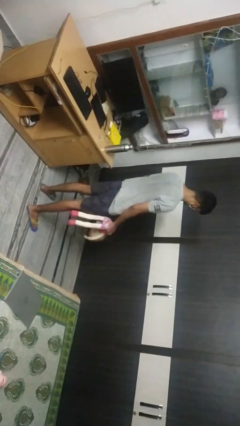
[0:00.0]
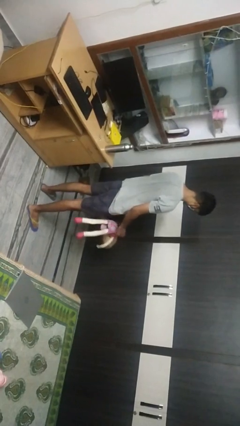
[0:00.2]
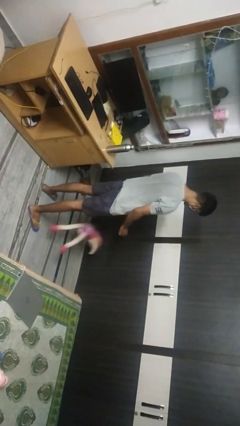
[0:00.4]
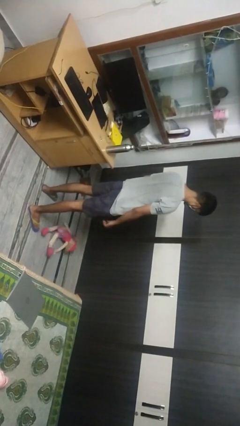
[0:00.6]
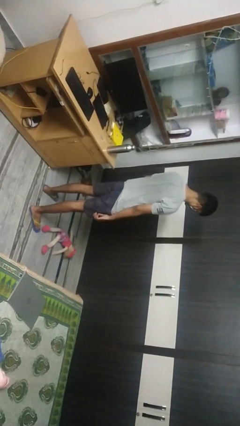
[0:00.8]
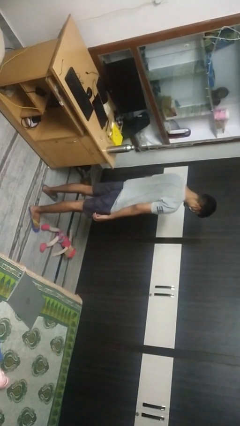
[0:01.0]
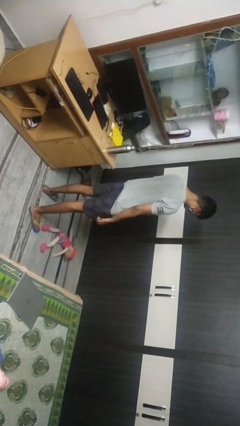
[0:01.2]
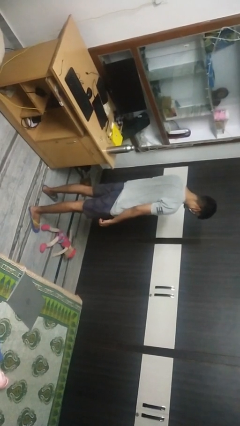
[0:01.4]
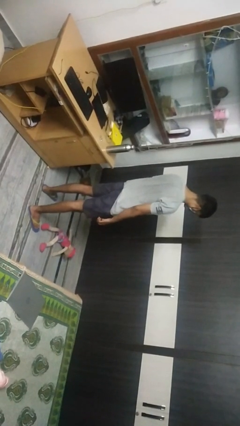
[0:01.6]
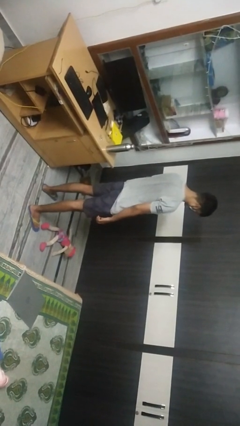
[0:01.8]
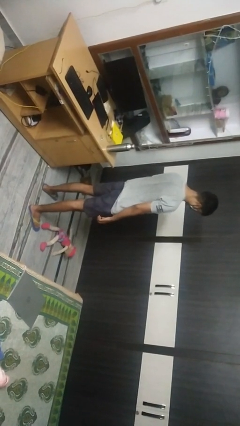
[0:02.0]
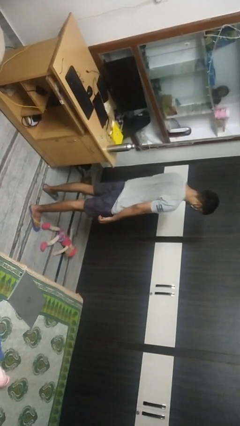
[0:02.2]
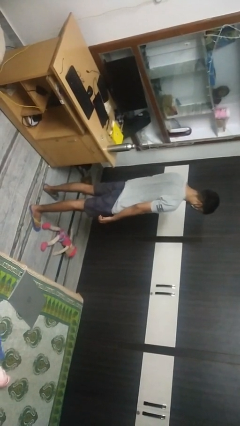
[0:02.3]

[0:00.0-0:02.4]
person drops object

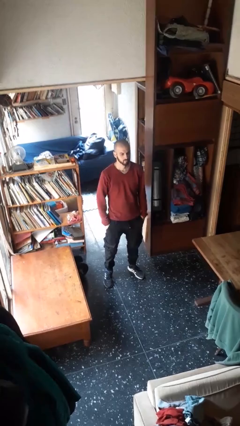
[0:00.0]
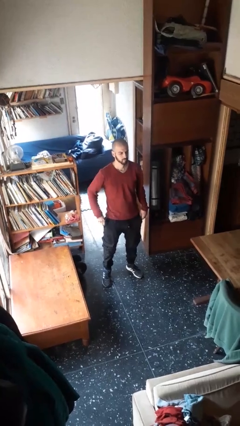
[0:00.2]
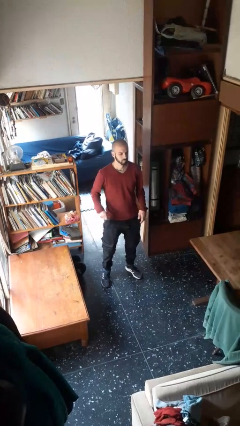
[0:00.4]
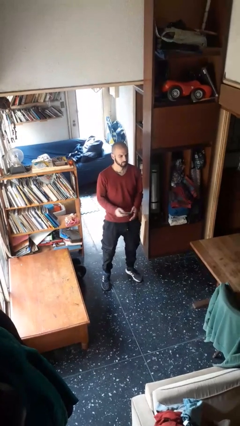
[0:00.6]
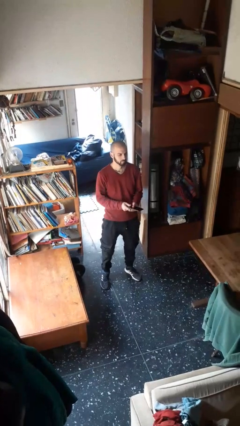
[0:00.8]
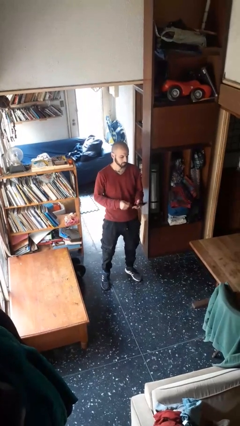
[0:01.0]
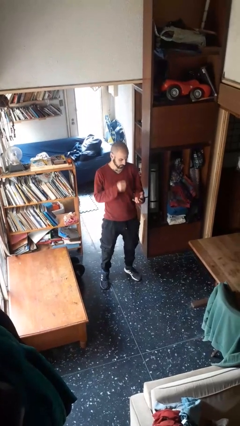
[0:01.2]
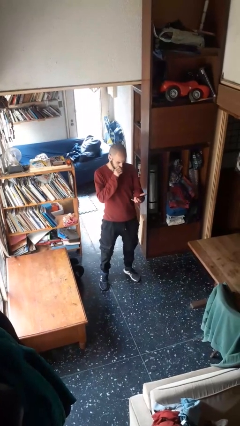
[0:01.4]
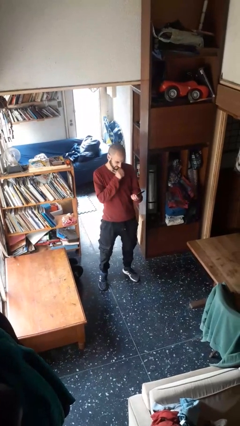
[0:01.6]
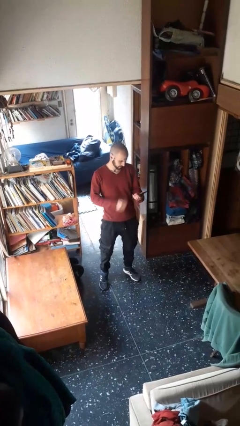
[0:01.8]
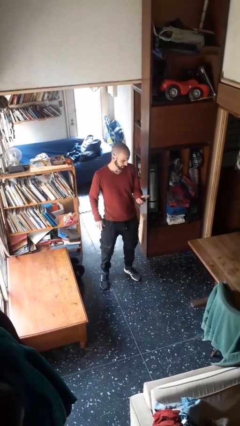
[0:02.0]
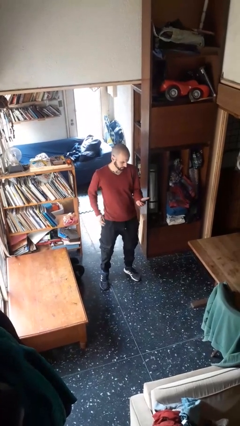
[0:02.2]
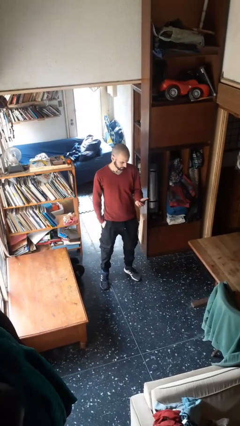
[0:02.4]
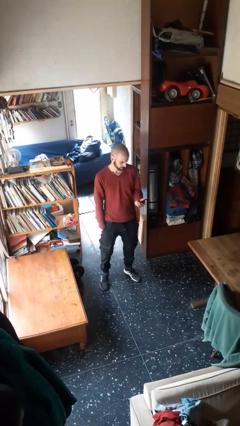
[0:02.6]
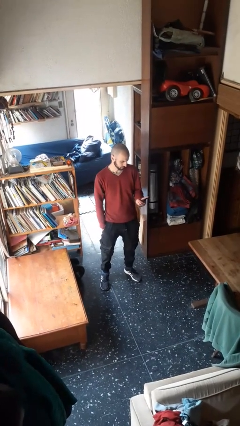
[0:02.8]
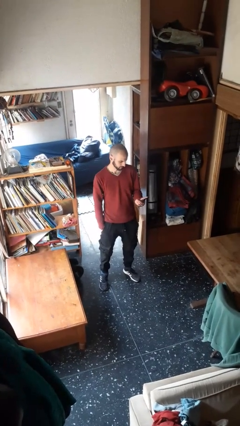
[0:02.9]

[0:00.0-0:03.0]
person takes phone from pocket

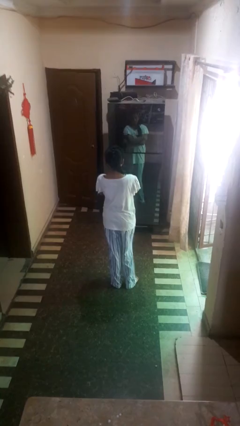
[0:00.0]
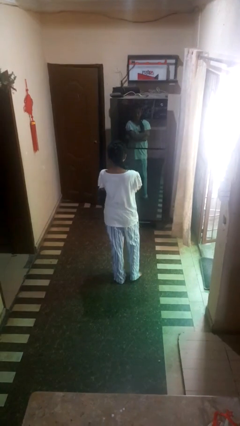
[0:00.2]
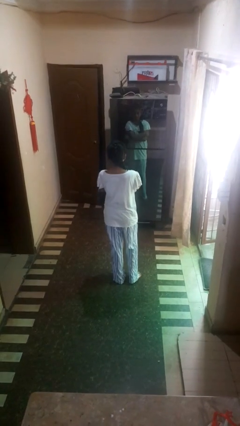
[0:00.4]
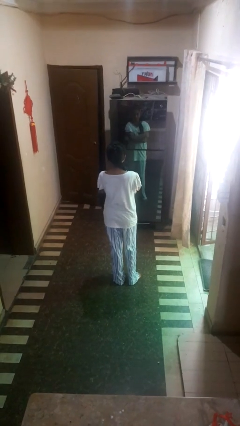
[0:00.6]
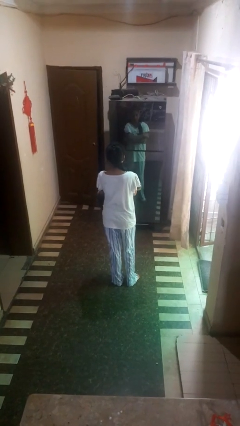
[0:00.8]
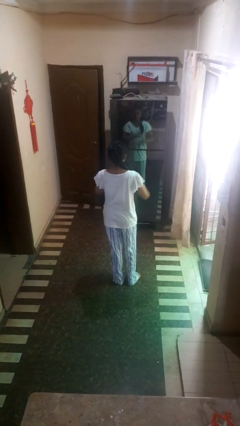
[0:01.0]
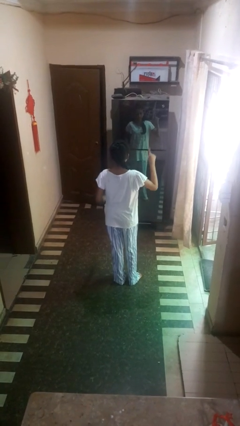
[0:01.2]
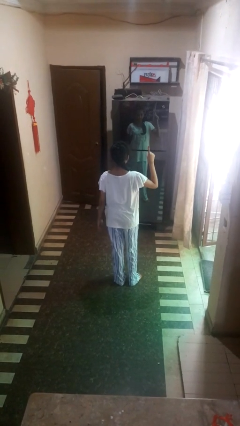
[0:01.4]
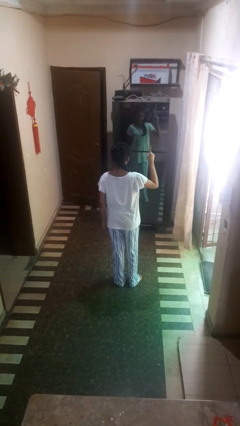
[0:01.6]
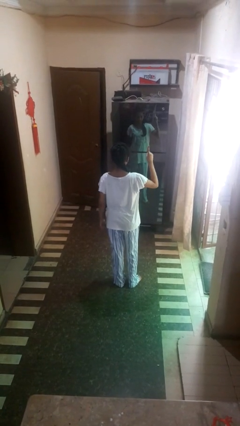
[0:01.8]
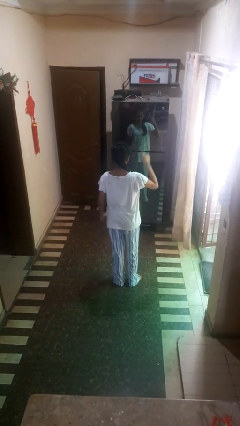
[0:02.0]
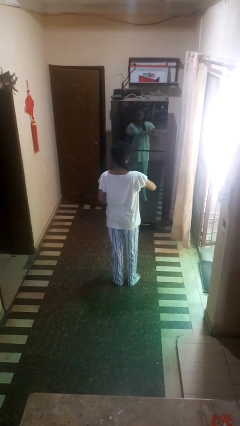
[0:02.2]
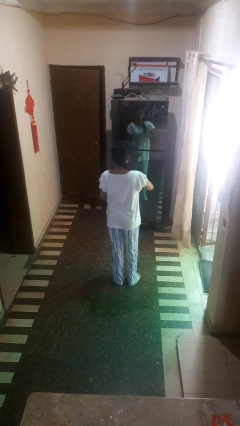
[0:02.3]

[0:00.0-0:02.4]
person gestures number one

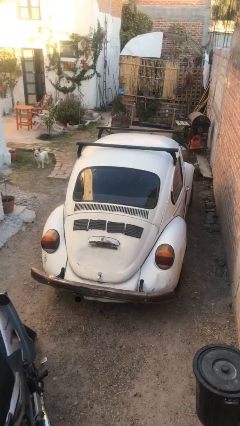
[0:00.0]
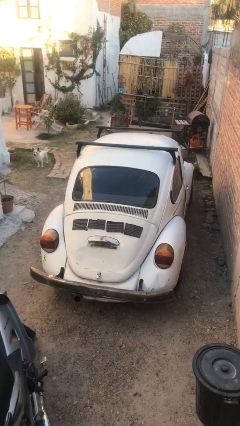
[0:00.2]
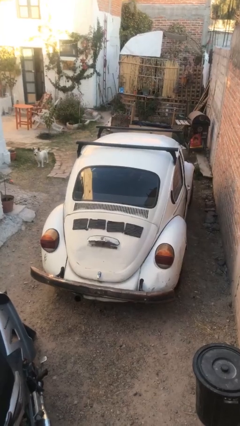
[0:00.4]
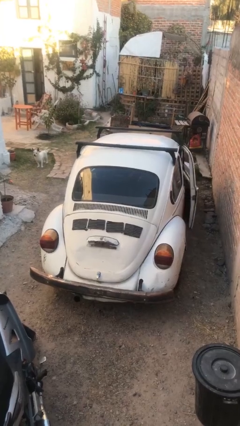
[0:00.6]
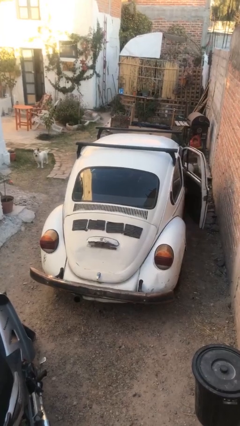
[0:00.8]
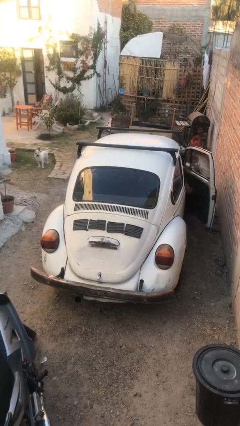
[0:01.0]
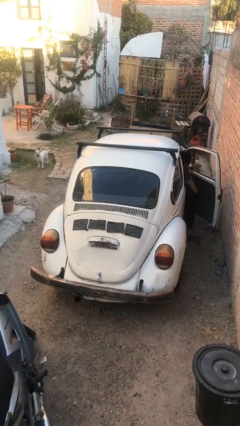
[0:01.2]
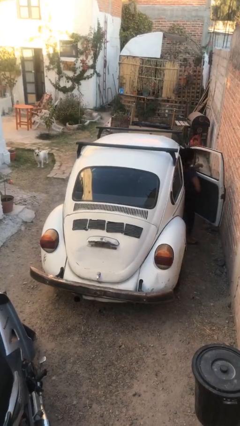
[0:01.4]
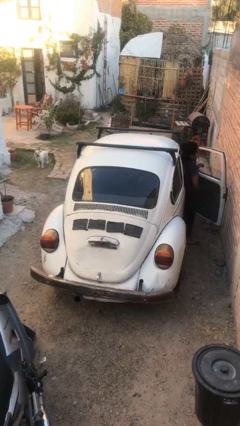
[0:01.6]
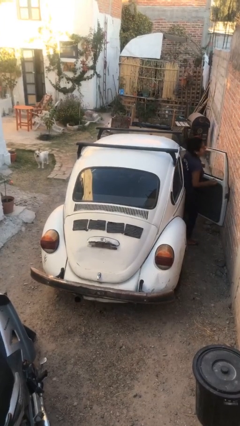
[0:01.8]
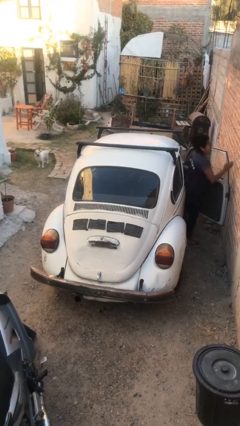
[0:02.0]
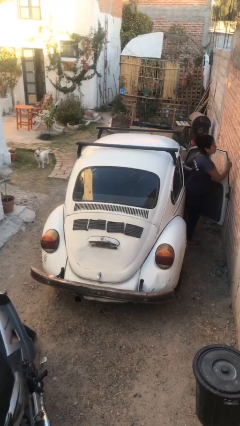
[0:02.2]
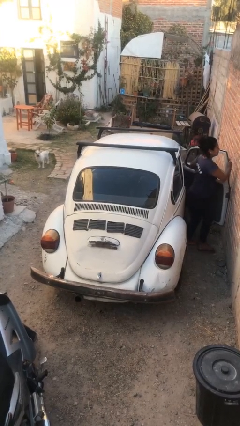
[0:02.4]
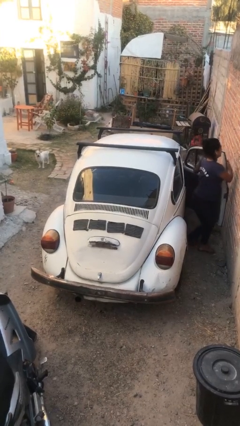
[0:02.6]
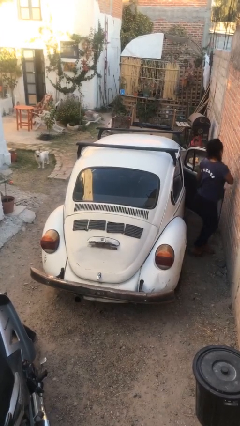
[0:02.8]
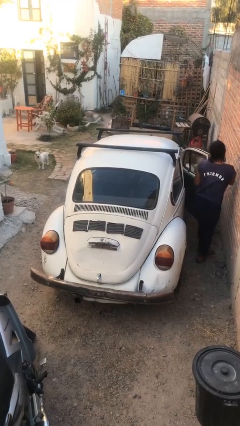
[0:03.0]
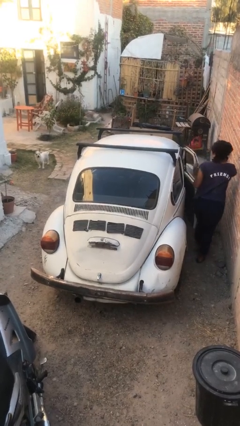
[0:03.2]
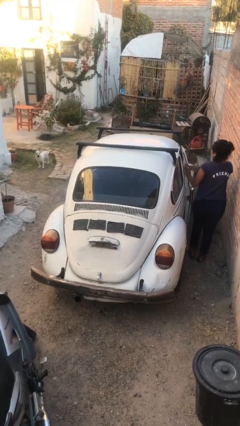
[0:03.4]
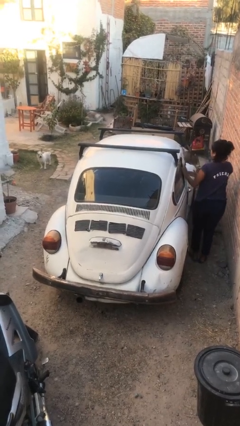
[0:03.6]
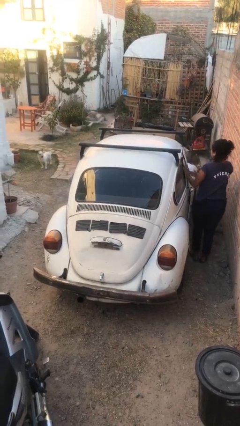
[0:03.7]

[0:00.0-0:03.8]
car drops off person

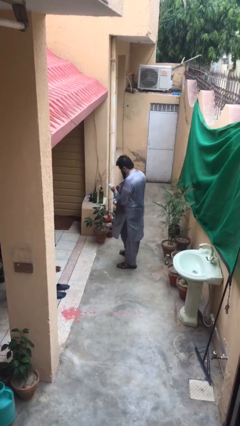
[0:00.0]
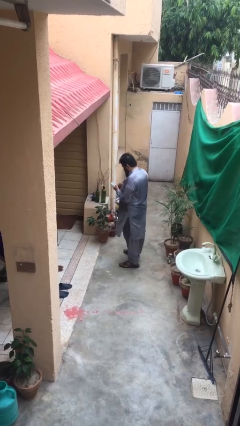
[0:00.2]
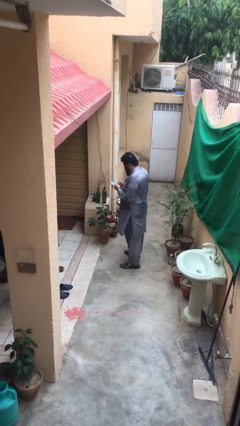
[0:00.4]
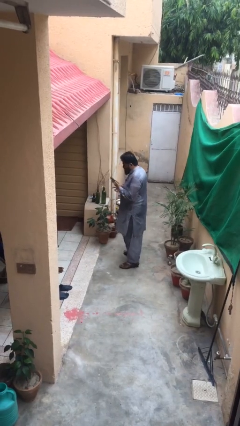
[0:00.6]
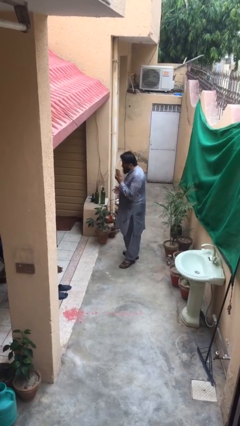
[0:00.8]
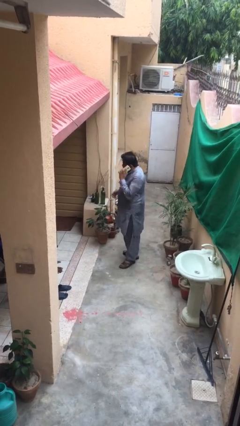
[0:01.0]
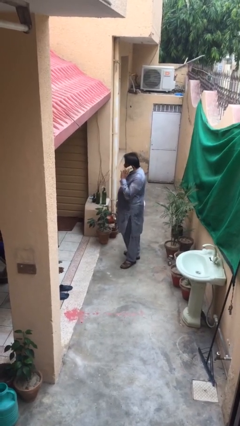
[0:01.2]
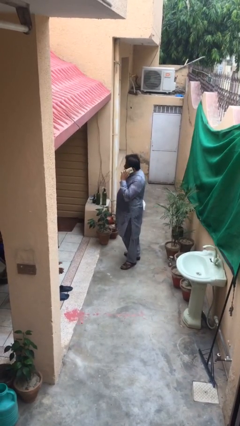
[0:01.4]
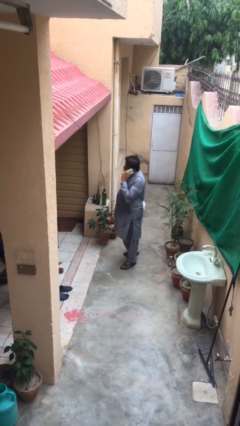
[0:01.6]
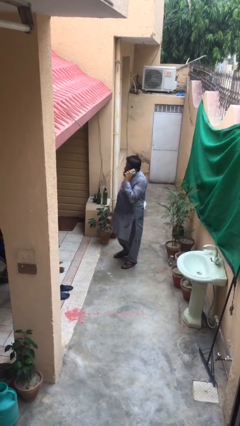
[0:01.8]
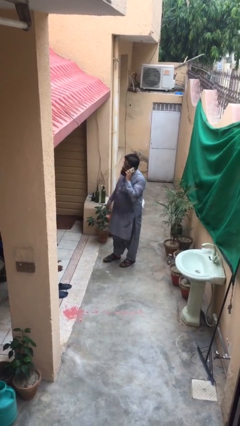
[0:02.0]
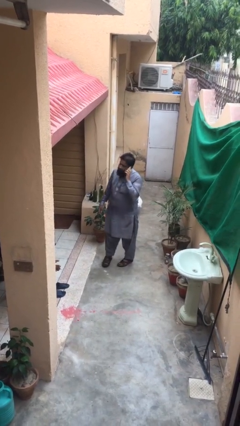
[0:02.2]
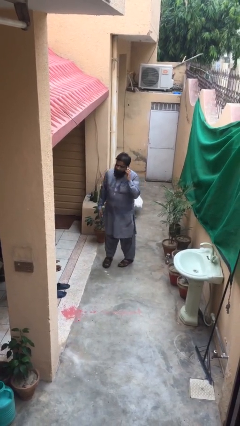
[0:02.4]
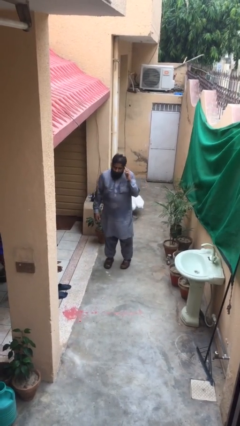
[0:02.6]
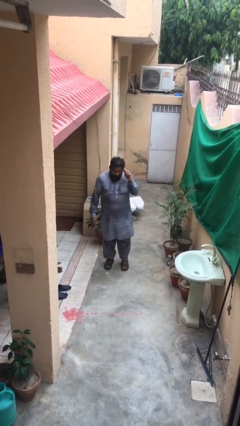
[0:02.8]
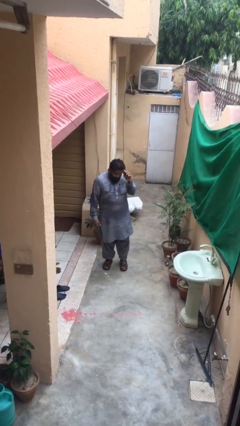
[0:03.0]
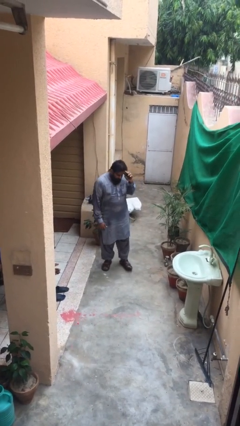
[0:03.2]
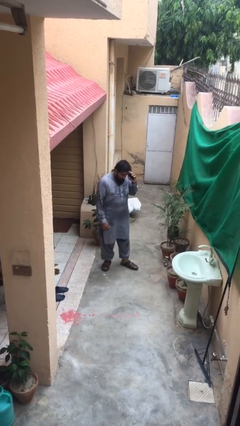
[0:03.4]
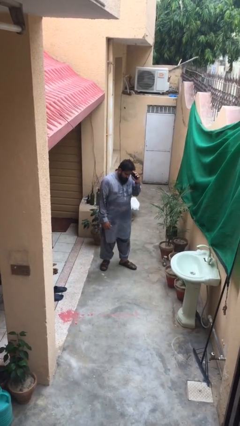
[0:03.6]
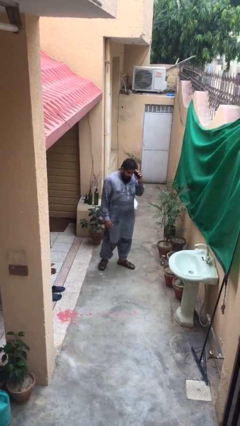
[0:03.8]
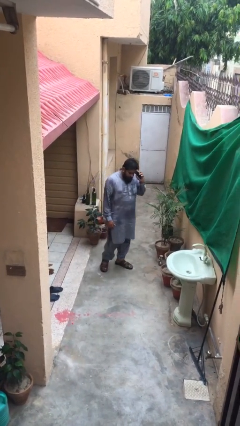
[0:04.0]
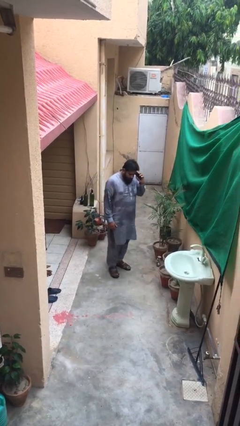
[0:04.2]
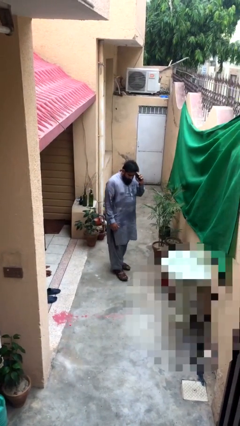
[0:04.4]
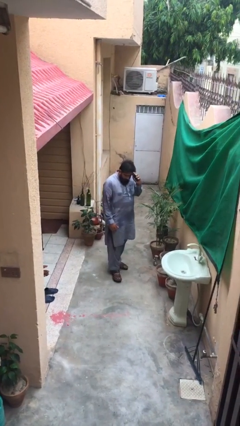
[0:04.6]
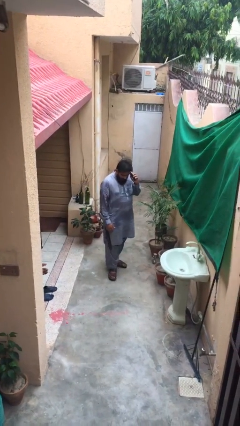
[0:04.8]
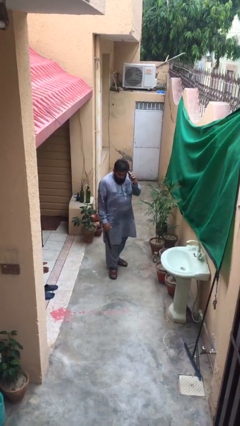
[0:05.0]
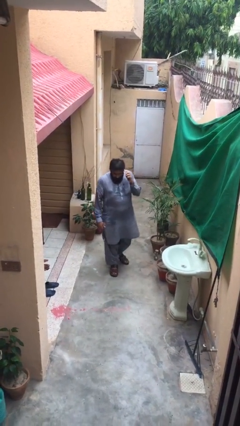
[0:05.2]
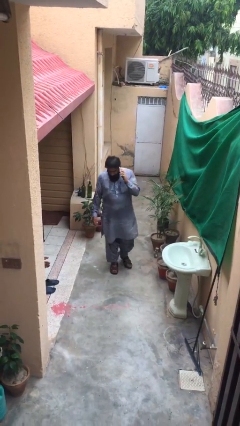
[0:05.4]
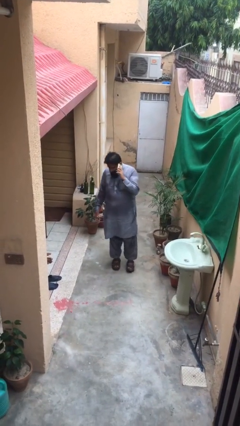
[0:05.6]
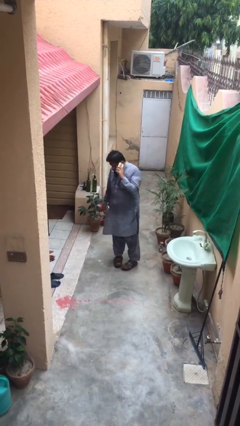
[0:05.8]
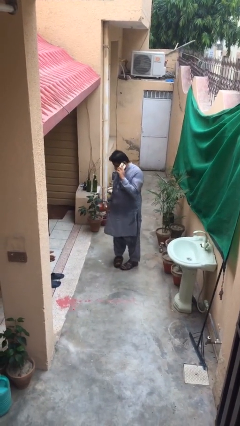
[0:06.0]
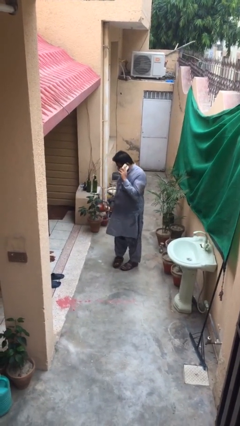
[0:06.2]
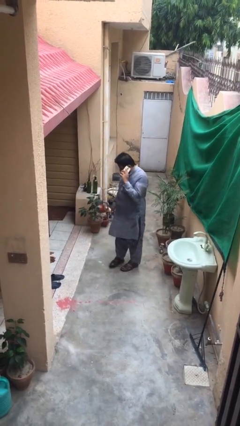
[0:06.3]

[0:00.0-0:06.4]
person talks on phone
